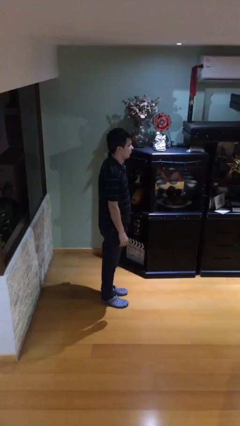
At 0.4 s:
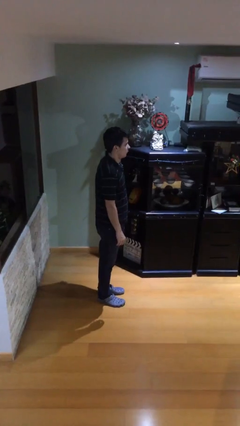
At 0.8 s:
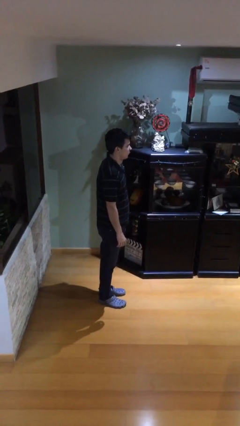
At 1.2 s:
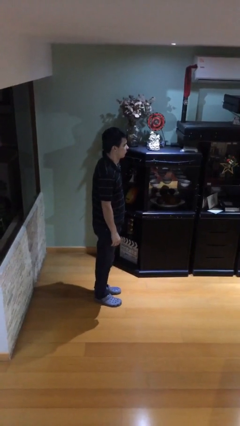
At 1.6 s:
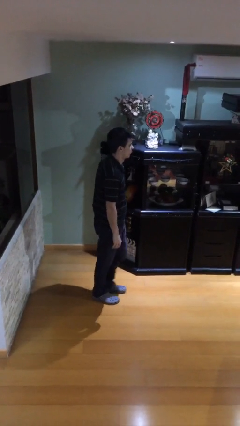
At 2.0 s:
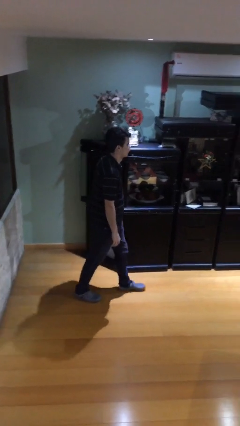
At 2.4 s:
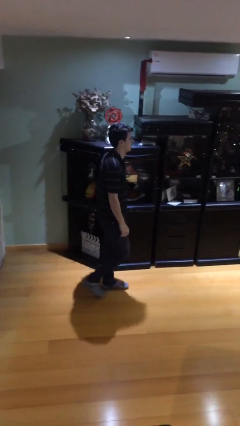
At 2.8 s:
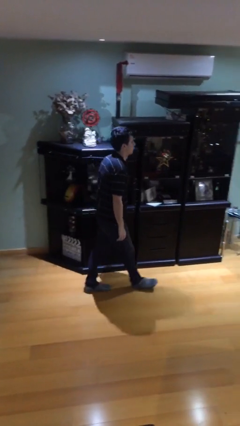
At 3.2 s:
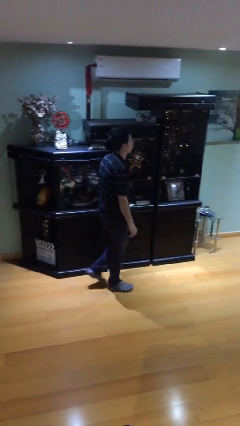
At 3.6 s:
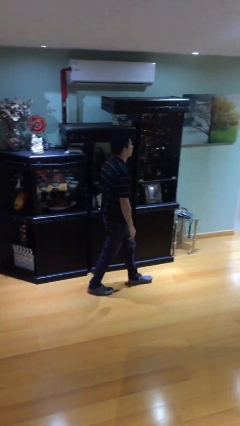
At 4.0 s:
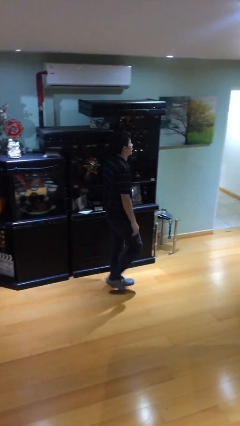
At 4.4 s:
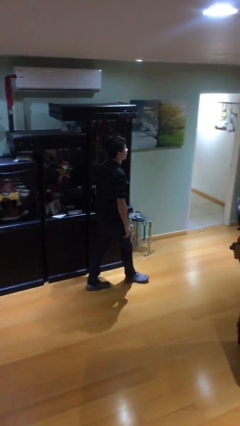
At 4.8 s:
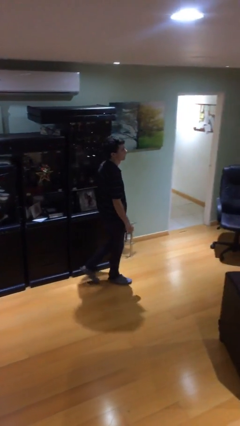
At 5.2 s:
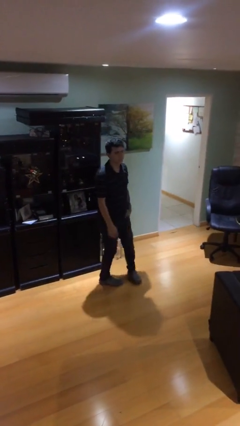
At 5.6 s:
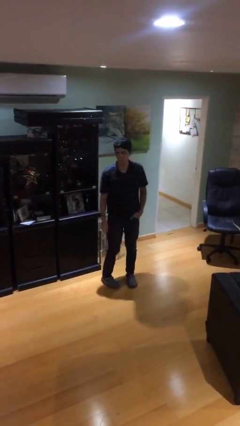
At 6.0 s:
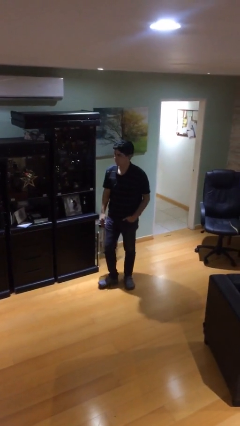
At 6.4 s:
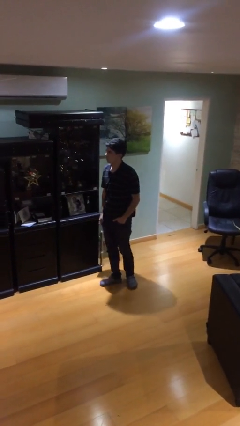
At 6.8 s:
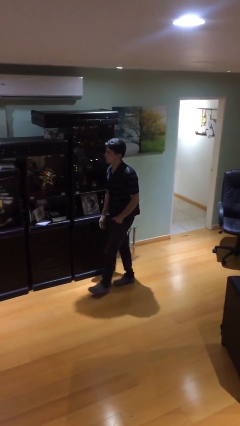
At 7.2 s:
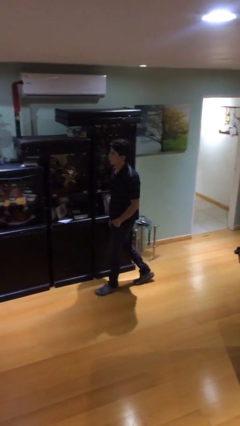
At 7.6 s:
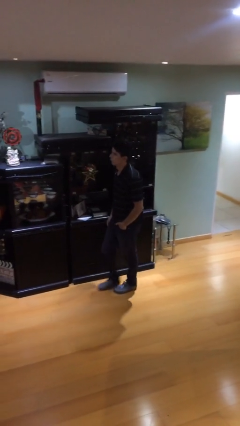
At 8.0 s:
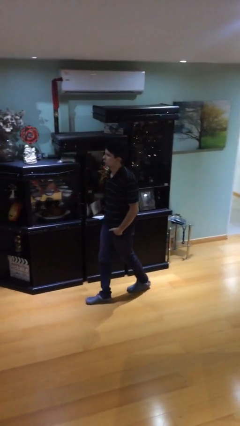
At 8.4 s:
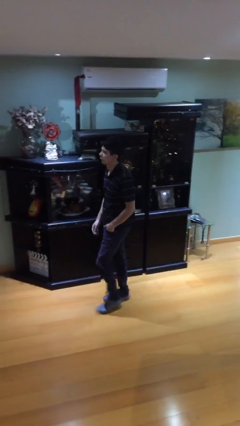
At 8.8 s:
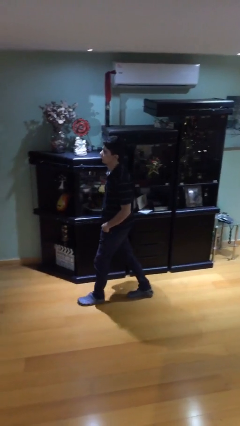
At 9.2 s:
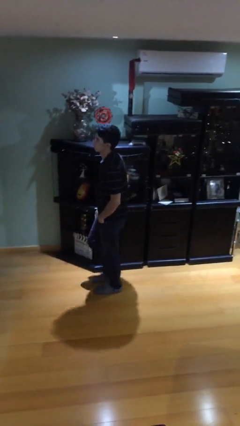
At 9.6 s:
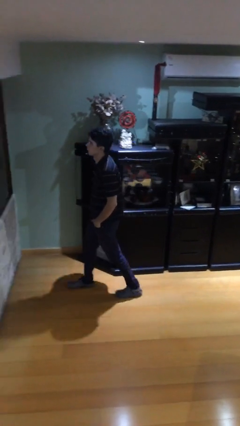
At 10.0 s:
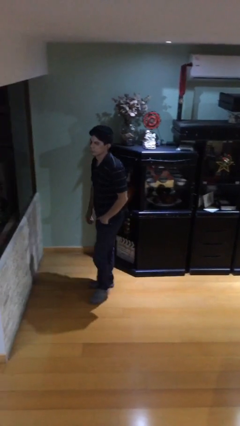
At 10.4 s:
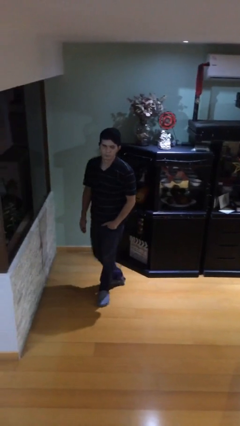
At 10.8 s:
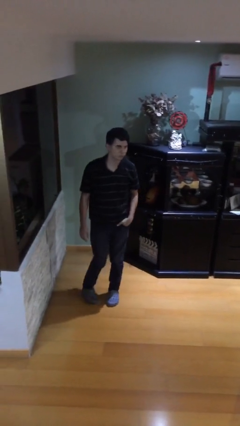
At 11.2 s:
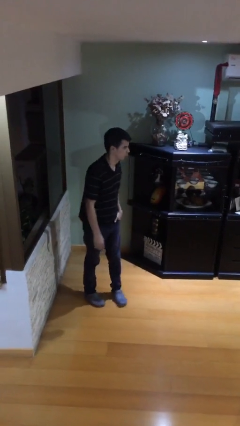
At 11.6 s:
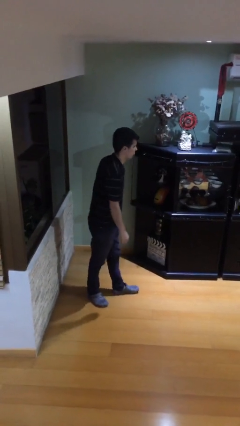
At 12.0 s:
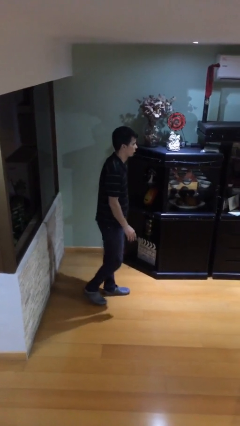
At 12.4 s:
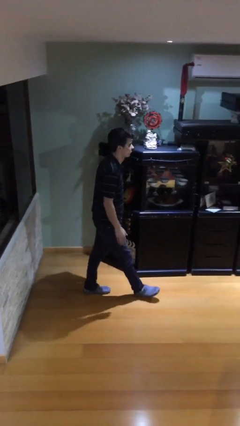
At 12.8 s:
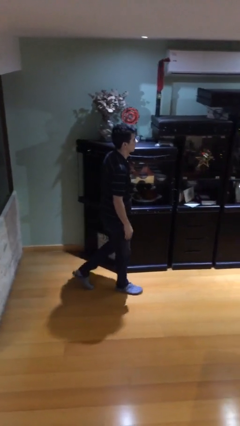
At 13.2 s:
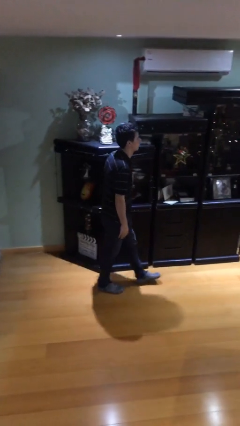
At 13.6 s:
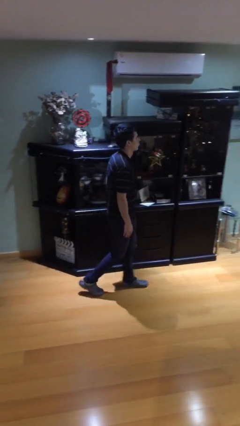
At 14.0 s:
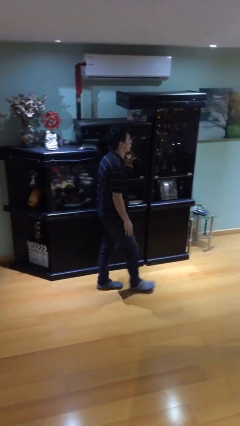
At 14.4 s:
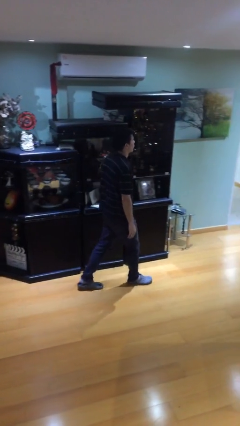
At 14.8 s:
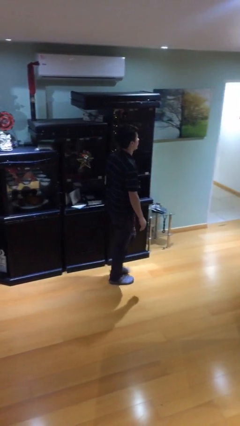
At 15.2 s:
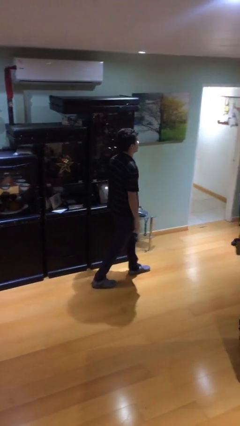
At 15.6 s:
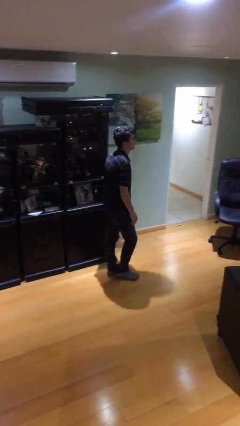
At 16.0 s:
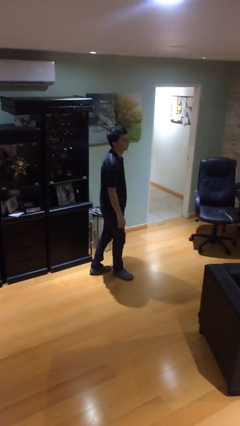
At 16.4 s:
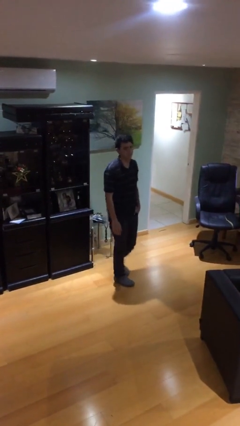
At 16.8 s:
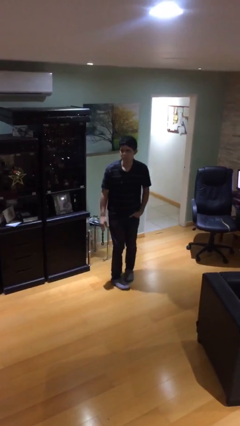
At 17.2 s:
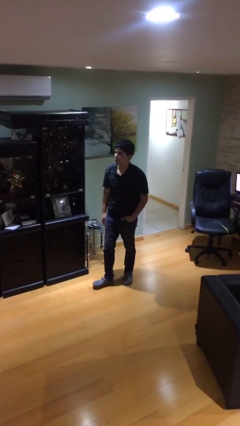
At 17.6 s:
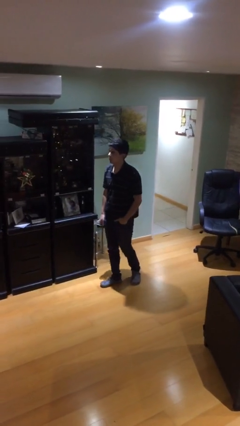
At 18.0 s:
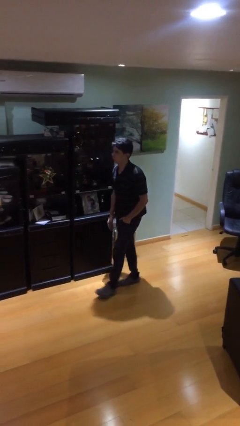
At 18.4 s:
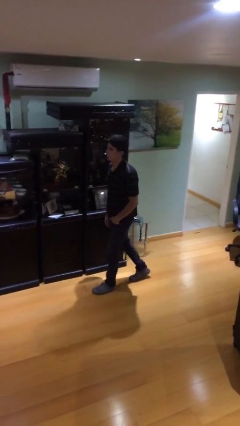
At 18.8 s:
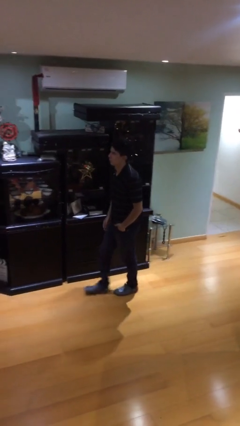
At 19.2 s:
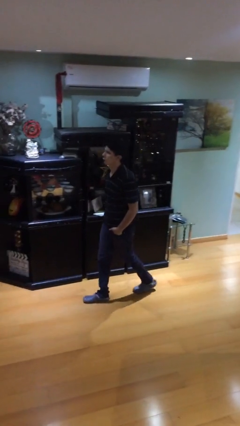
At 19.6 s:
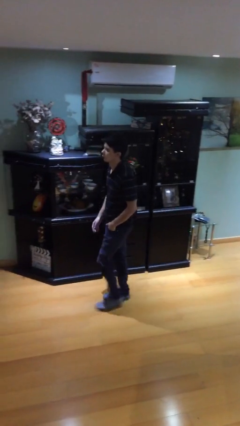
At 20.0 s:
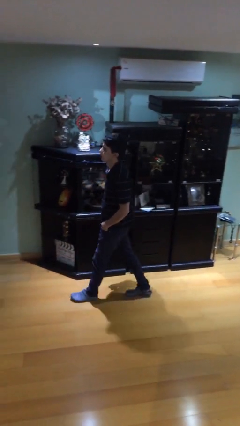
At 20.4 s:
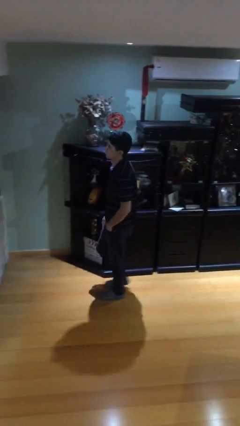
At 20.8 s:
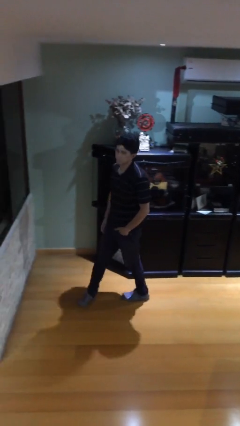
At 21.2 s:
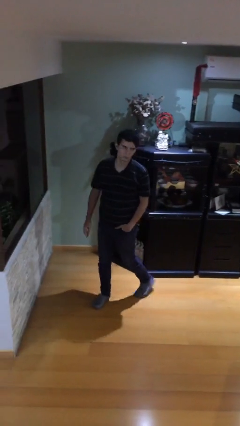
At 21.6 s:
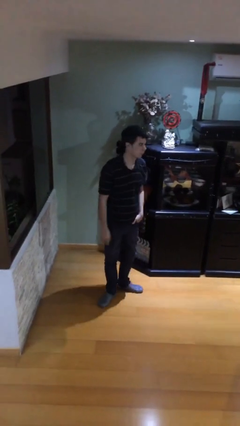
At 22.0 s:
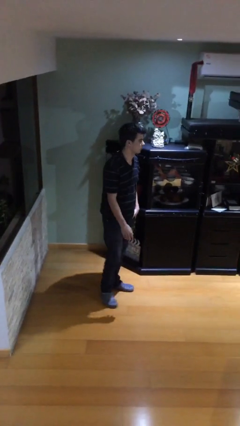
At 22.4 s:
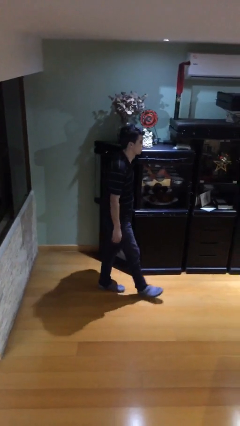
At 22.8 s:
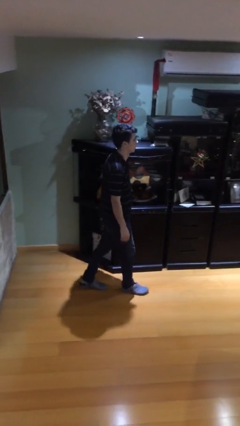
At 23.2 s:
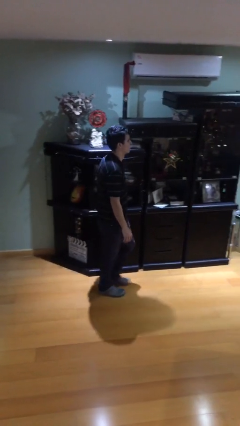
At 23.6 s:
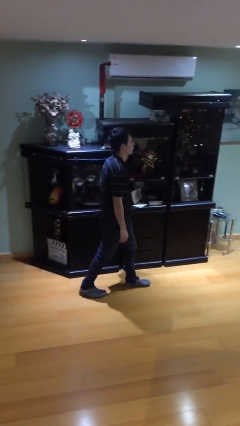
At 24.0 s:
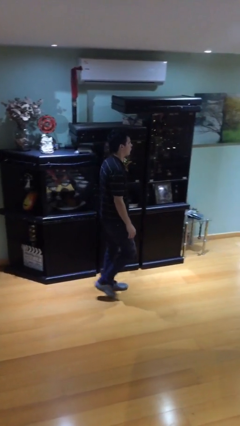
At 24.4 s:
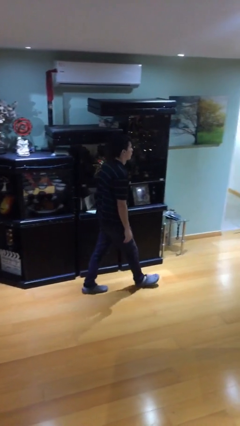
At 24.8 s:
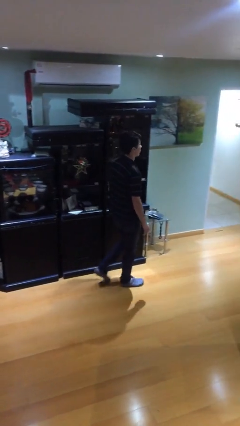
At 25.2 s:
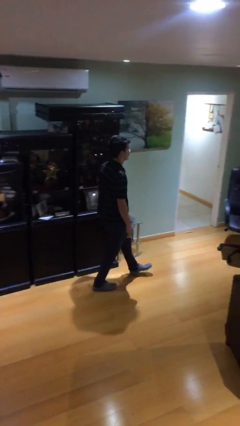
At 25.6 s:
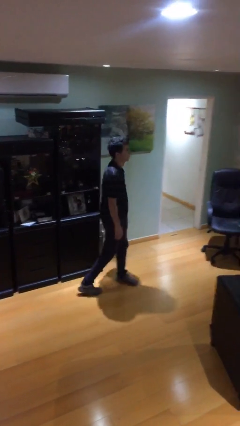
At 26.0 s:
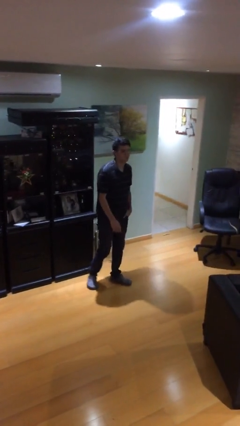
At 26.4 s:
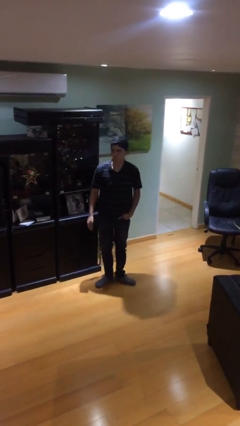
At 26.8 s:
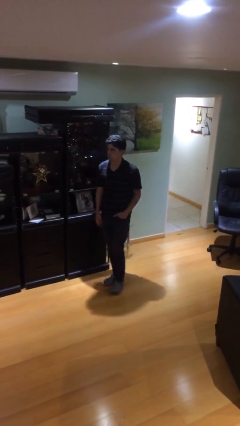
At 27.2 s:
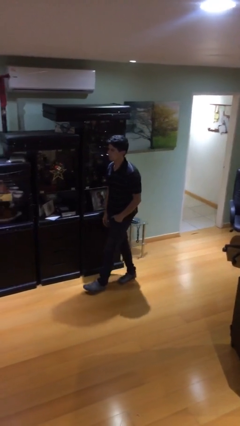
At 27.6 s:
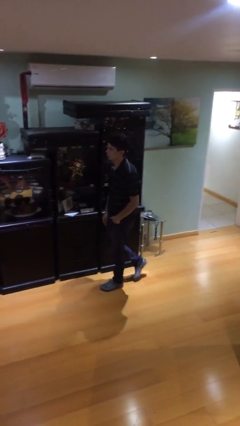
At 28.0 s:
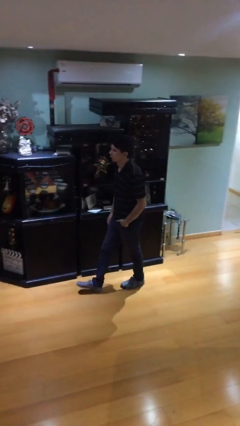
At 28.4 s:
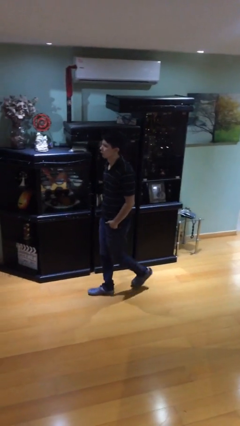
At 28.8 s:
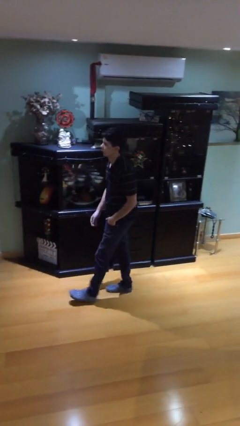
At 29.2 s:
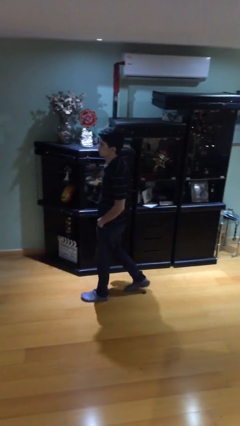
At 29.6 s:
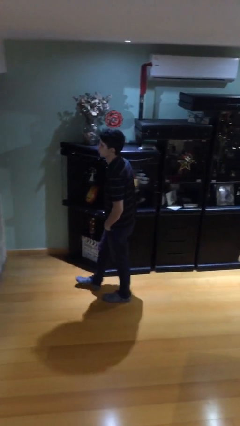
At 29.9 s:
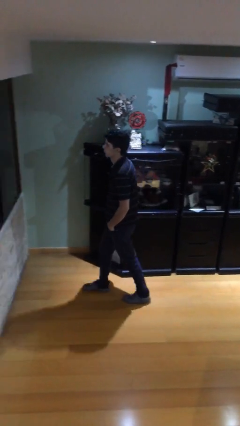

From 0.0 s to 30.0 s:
person walks

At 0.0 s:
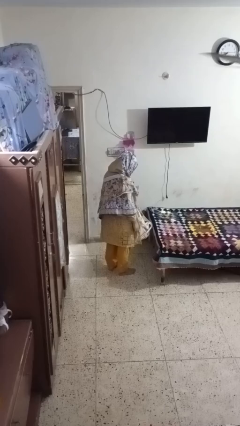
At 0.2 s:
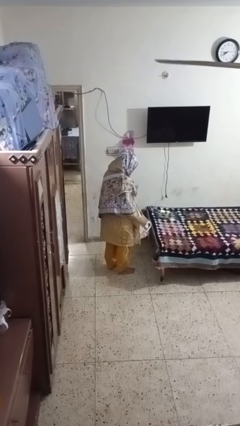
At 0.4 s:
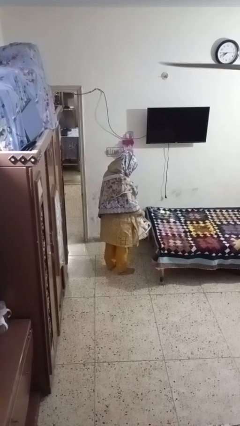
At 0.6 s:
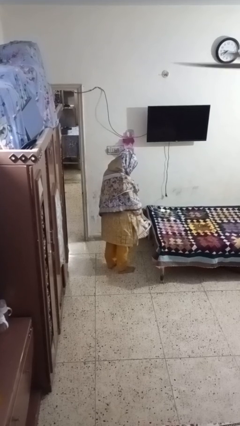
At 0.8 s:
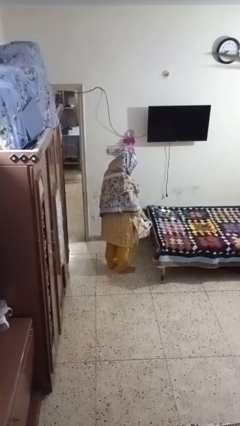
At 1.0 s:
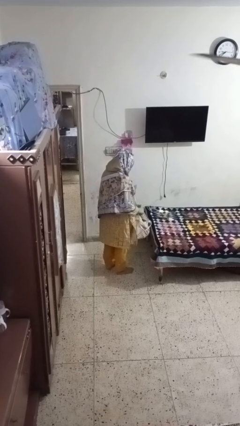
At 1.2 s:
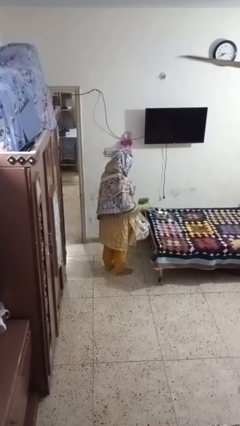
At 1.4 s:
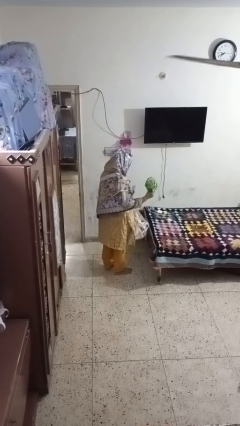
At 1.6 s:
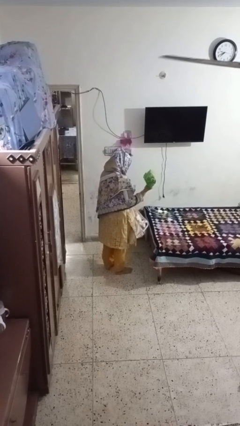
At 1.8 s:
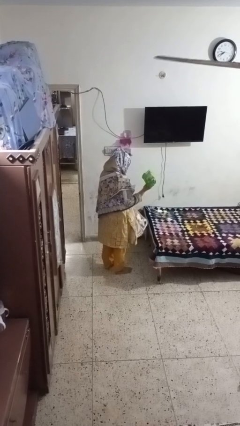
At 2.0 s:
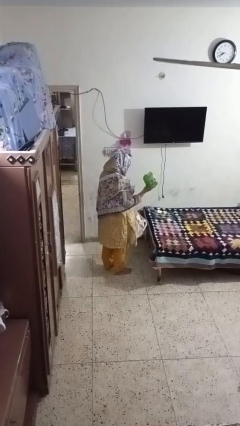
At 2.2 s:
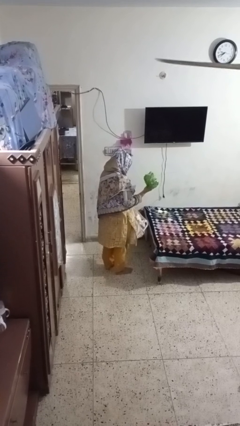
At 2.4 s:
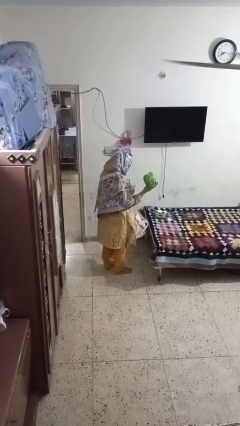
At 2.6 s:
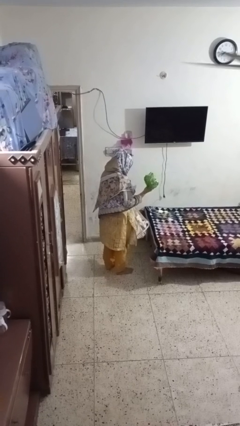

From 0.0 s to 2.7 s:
person takes object from bag

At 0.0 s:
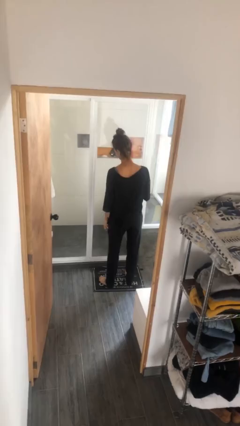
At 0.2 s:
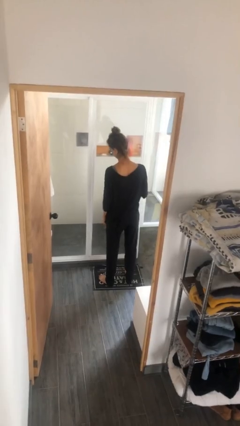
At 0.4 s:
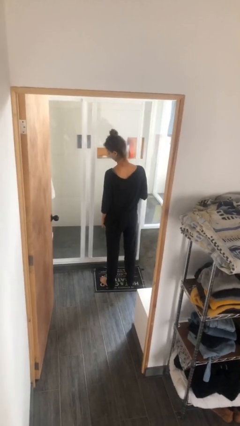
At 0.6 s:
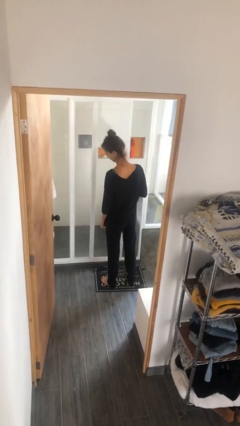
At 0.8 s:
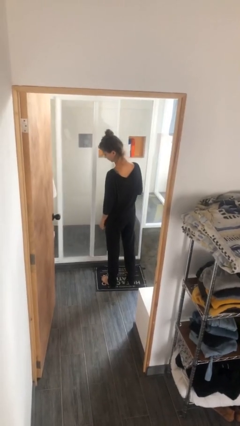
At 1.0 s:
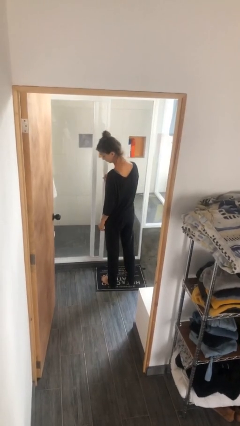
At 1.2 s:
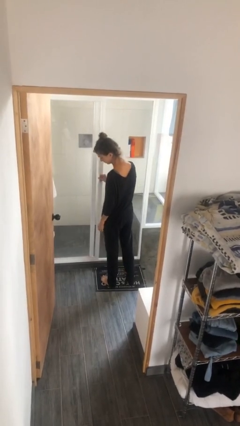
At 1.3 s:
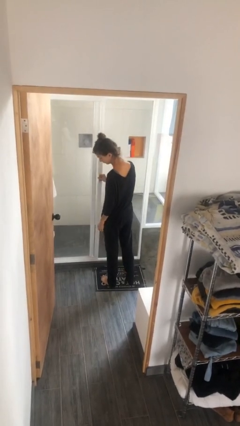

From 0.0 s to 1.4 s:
person opens sliding door
